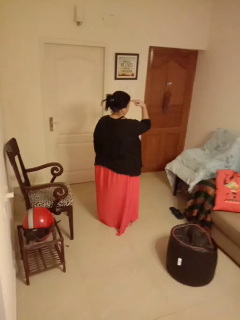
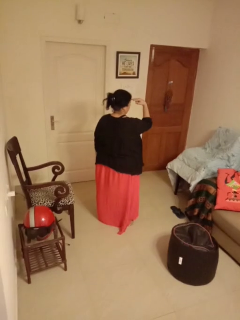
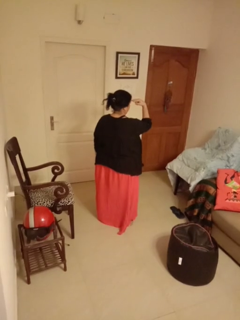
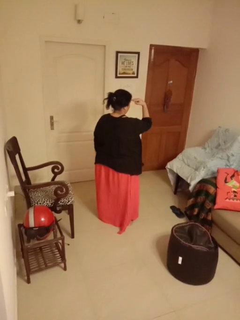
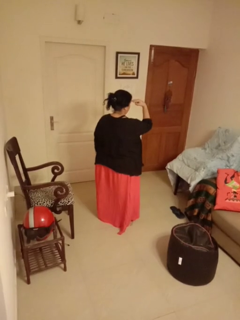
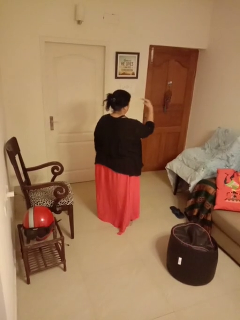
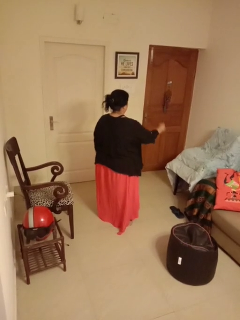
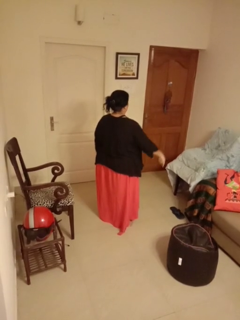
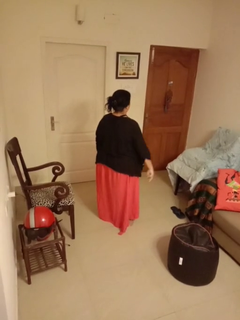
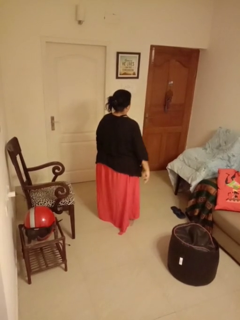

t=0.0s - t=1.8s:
person gestures watch closely

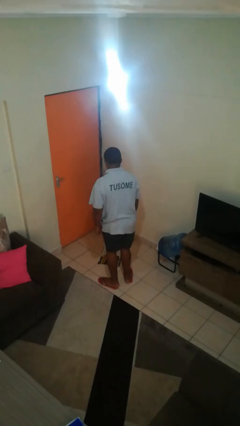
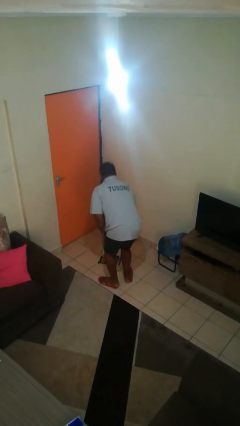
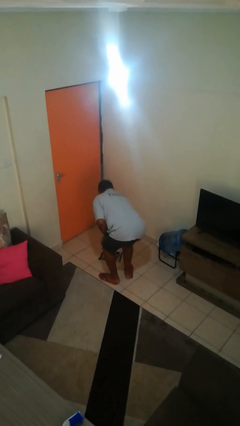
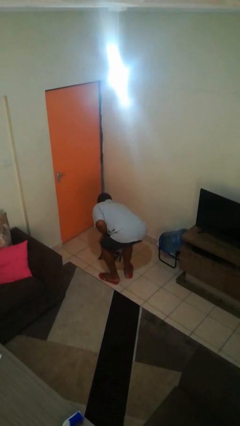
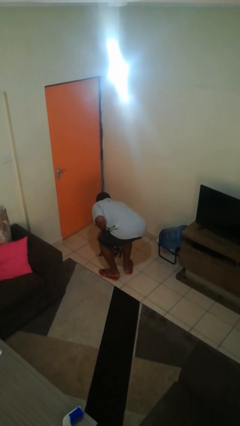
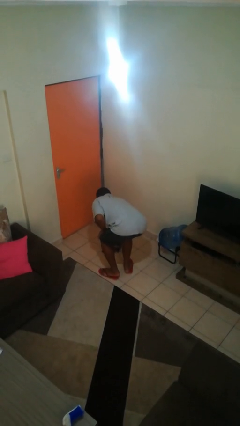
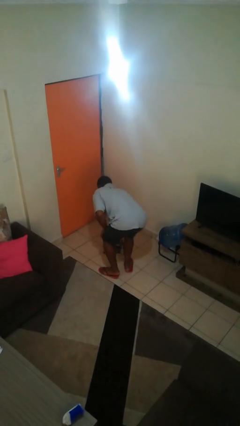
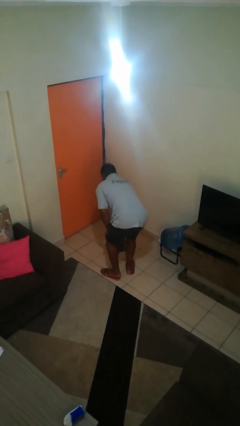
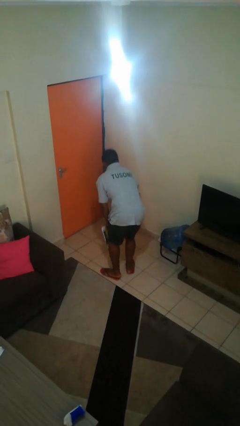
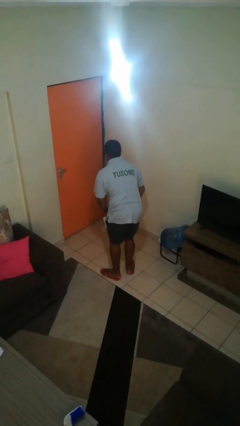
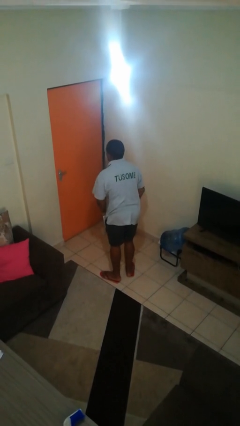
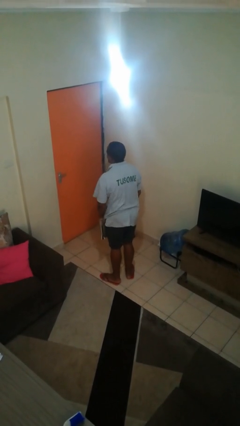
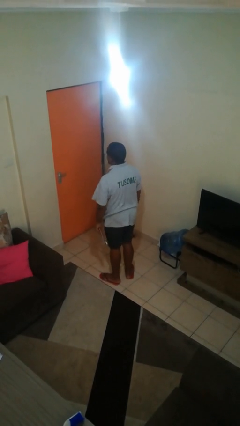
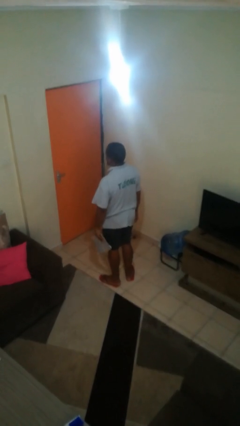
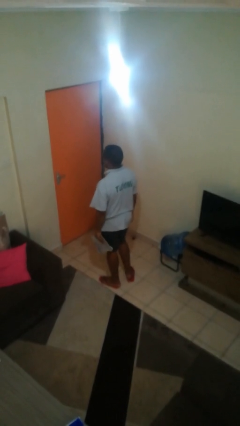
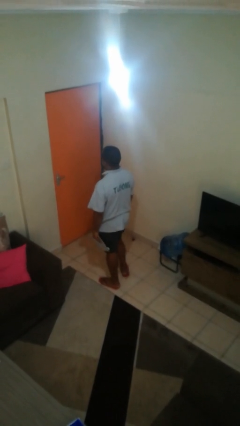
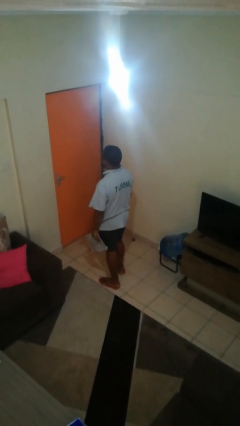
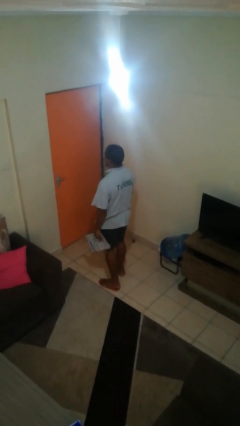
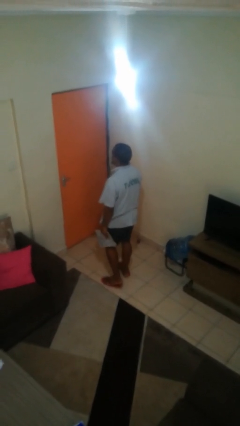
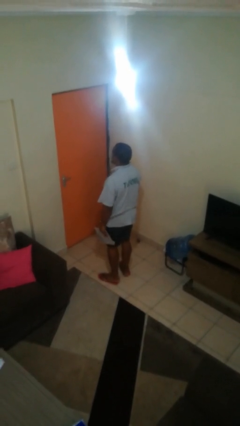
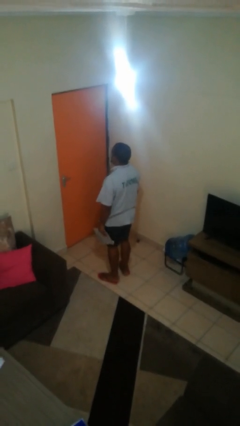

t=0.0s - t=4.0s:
person picks up object from floor

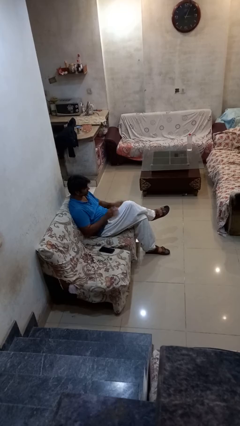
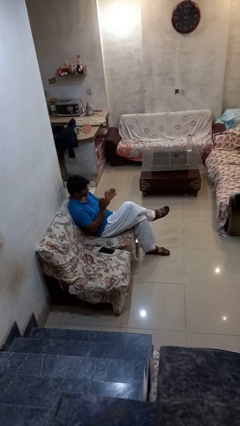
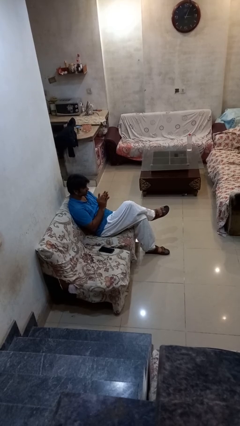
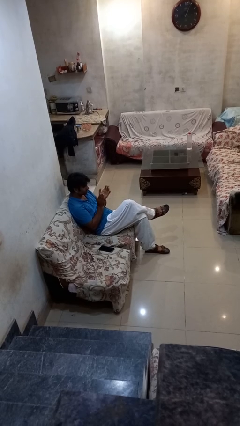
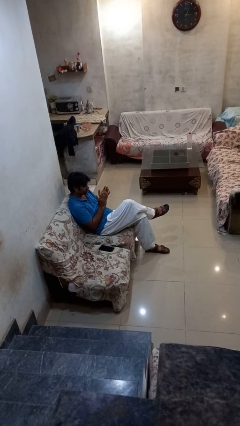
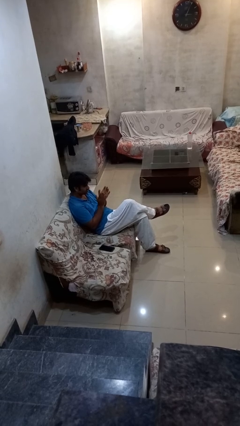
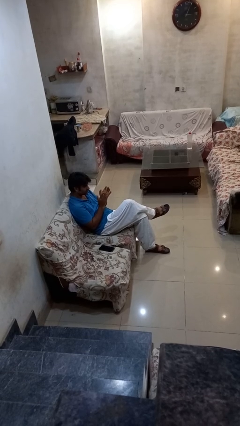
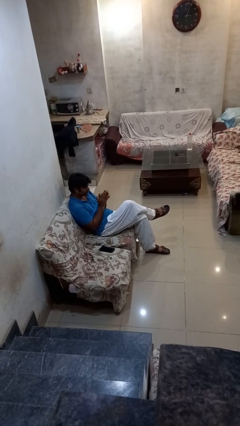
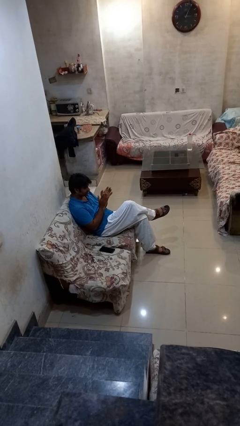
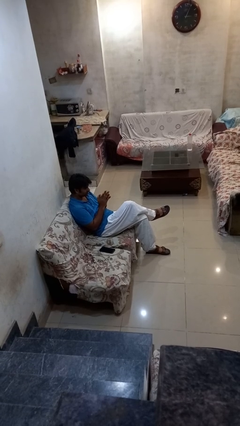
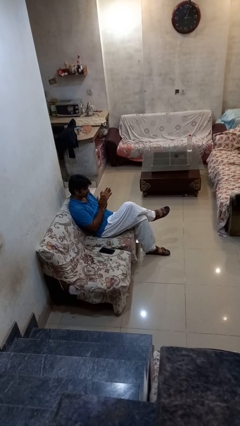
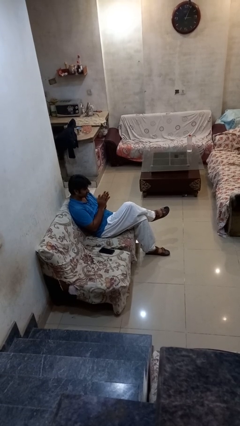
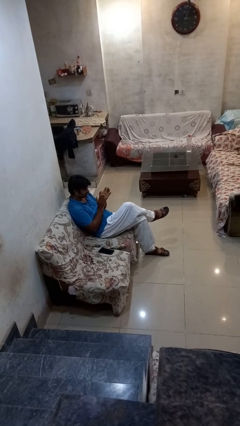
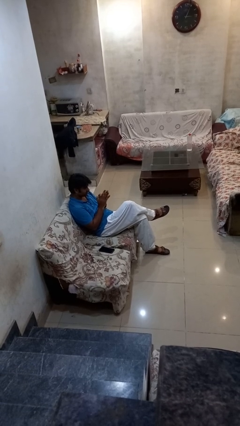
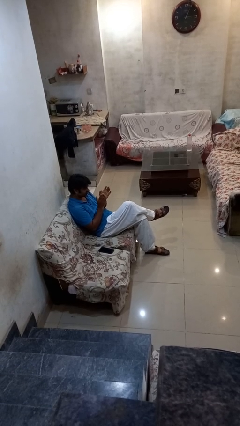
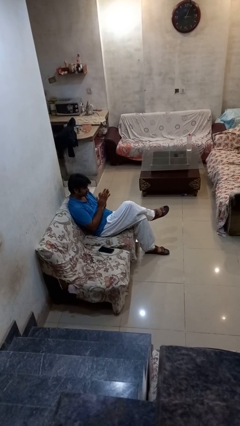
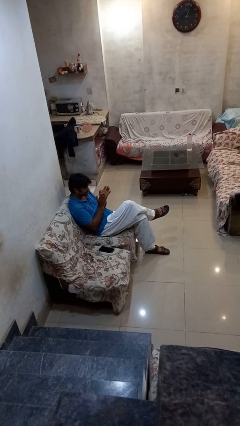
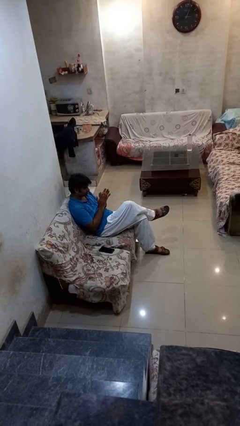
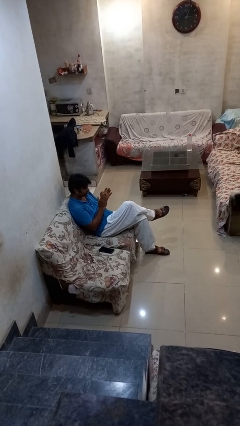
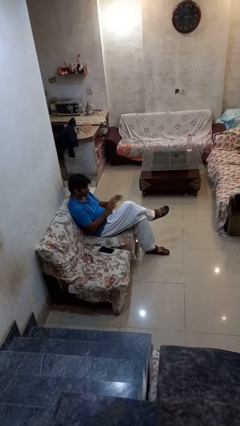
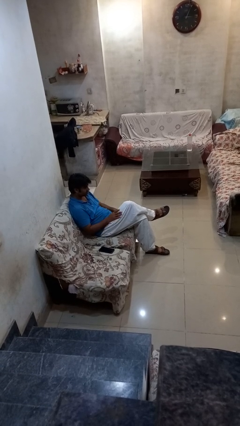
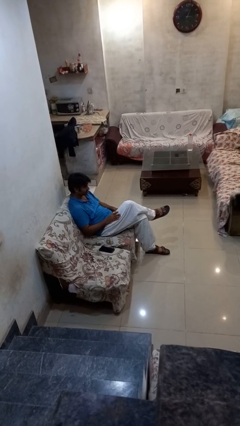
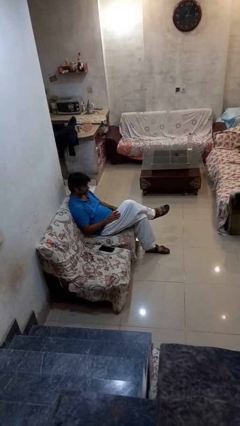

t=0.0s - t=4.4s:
person claps hands

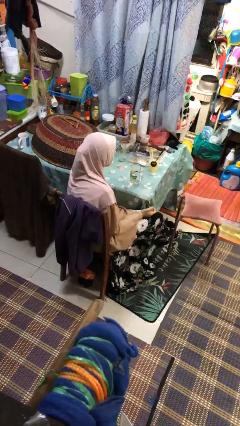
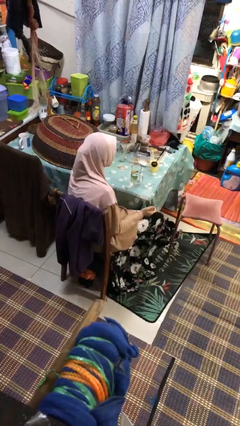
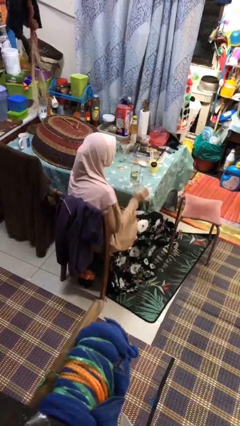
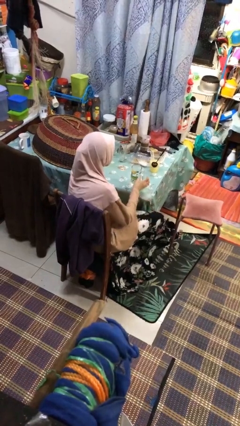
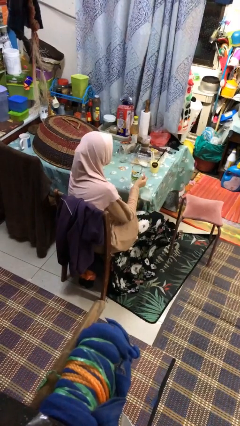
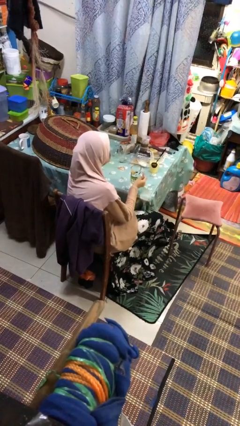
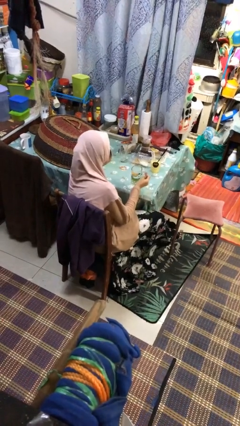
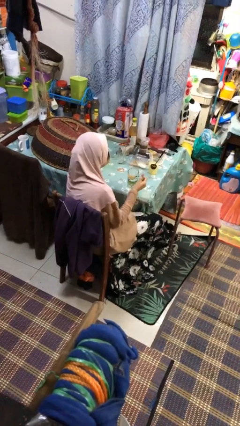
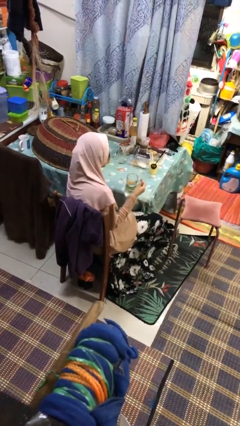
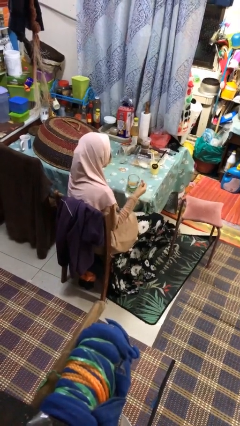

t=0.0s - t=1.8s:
person picks up object from table

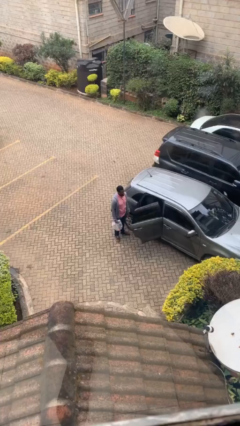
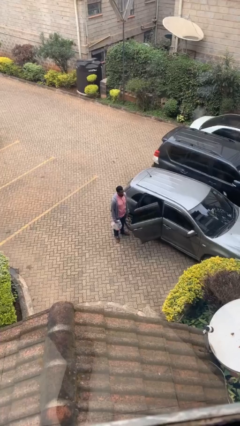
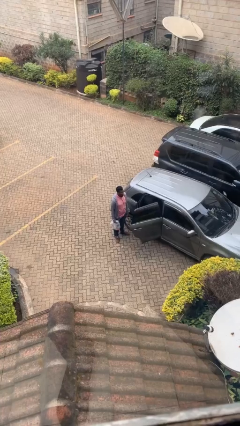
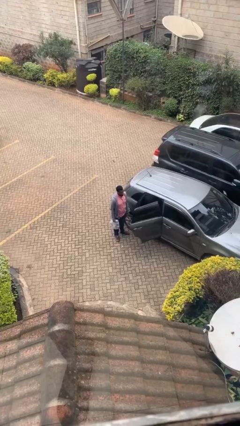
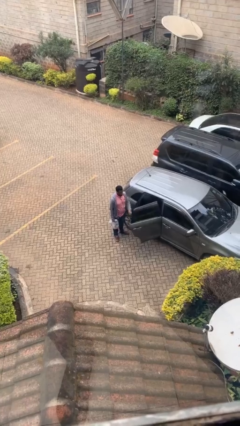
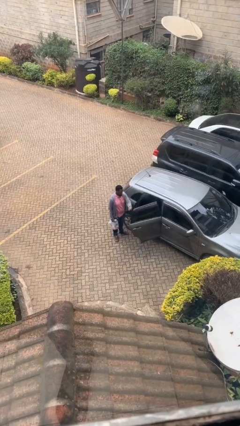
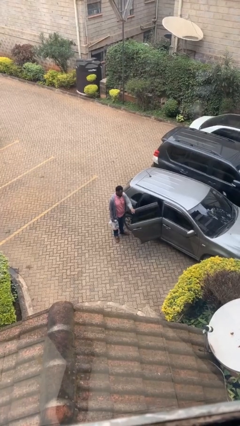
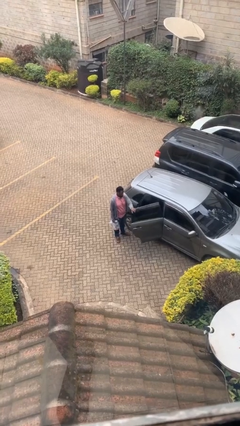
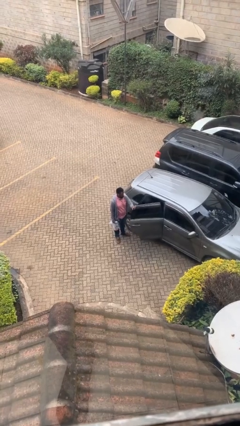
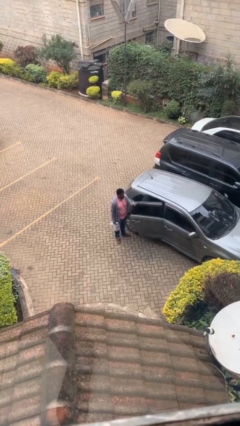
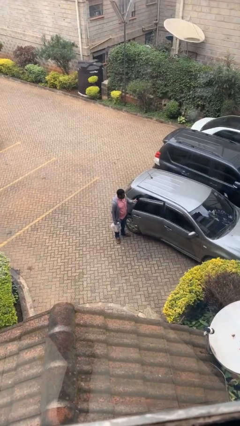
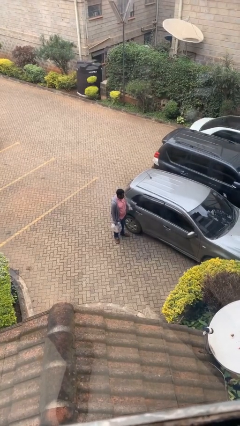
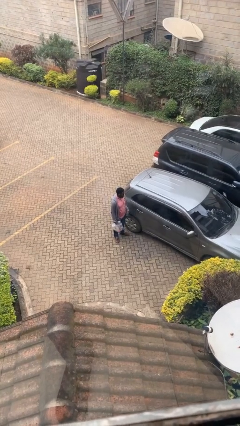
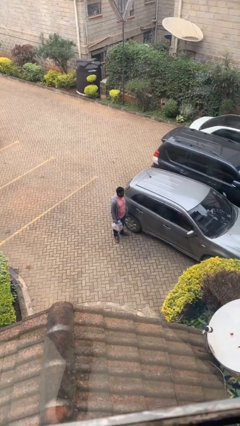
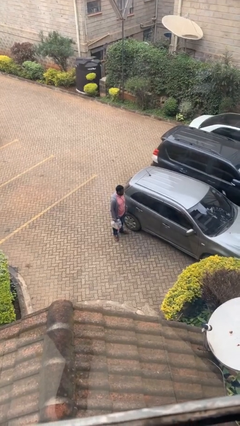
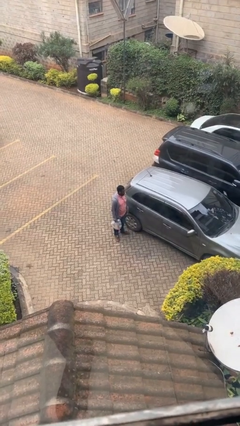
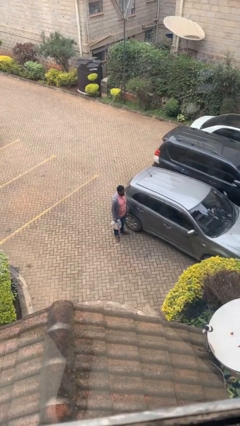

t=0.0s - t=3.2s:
person closes car door

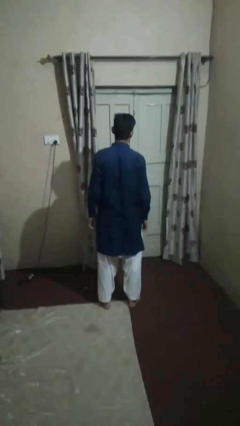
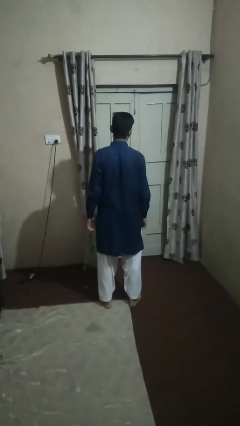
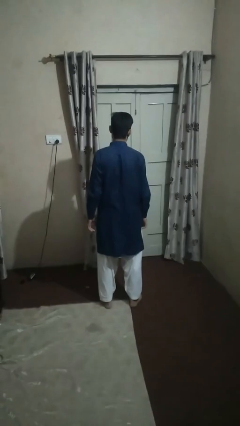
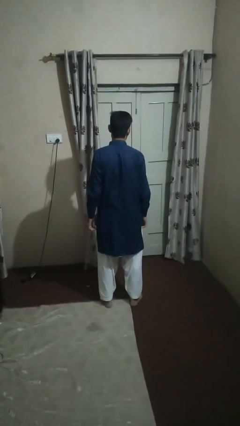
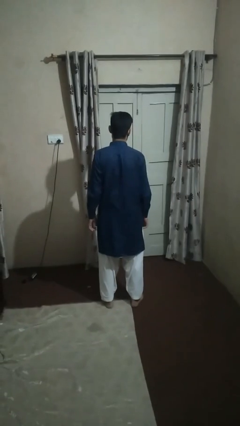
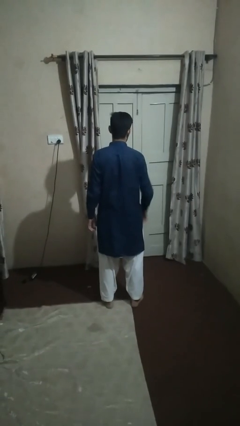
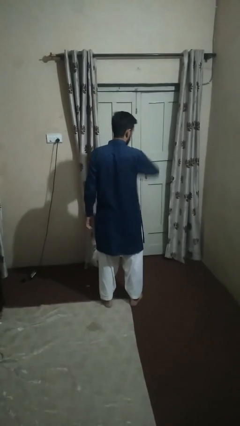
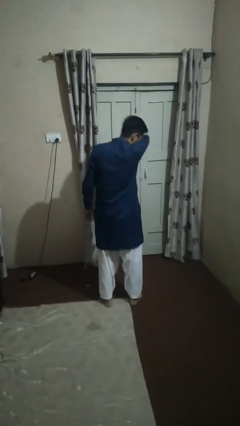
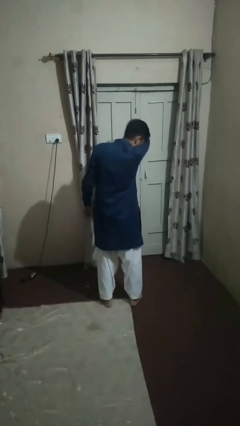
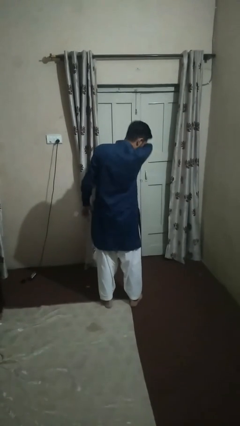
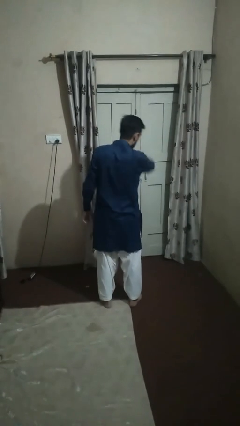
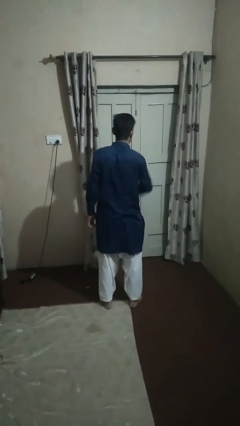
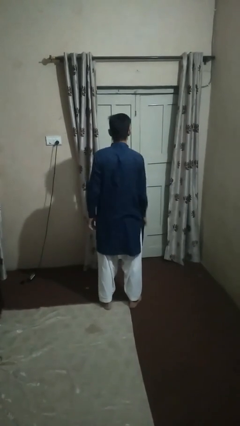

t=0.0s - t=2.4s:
person sneezes into arm

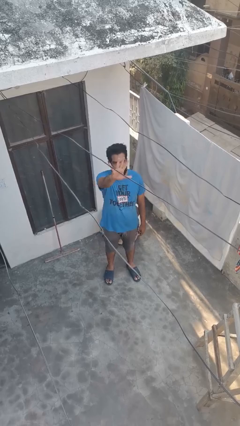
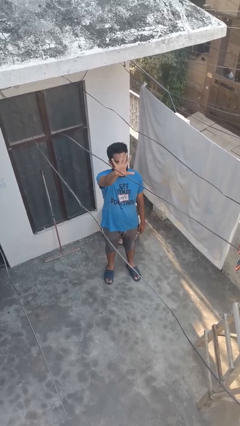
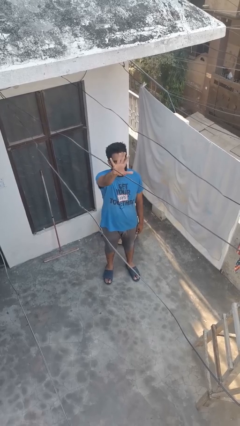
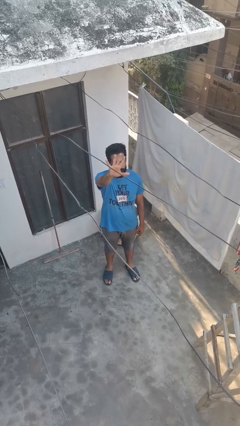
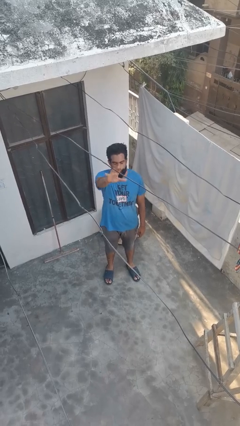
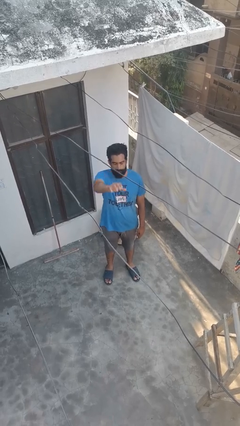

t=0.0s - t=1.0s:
person gestures number five
